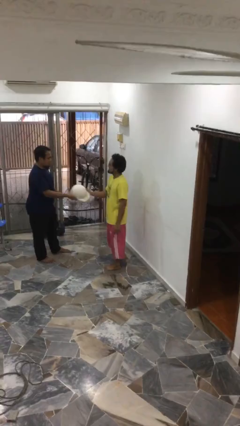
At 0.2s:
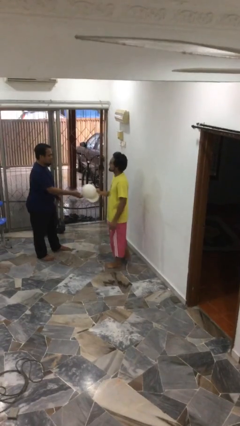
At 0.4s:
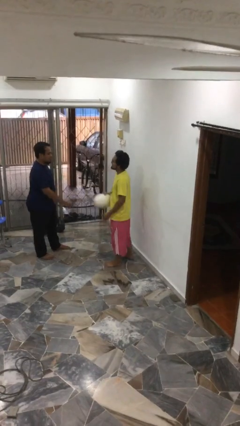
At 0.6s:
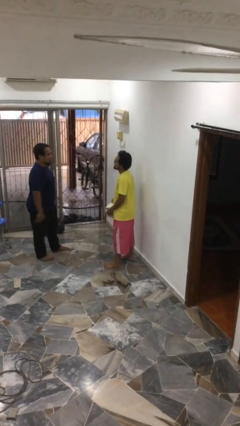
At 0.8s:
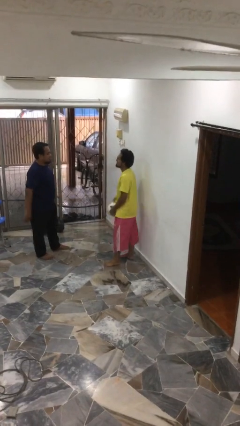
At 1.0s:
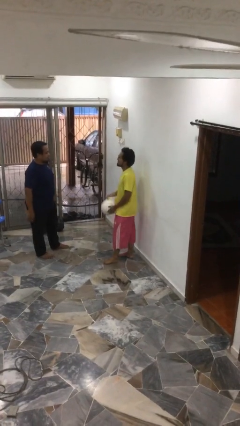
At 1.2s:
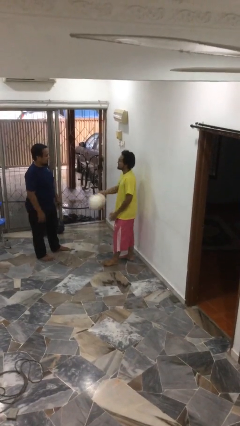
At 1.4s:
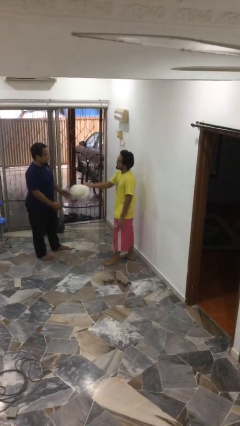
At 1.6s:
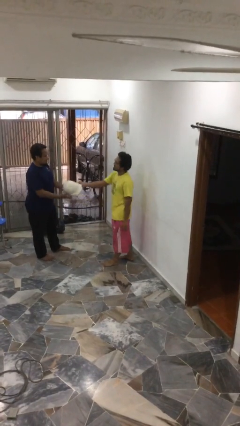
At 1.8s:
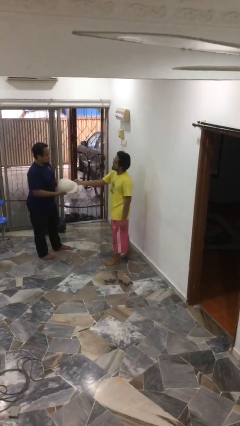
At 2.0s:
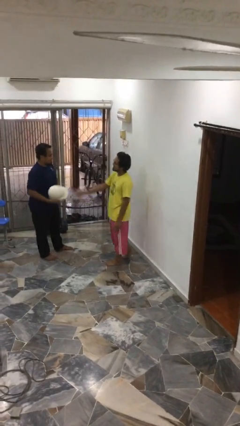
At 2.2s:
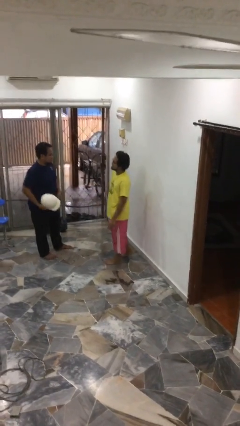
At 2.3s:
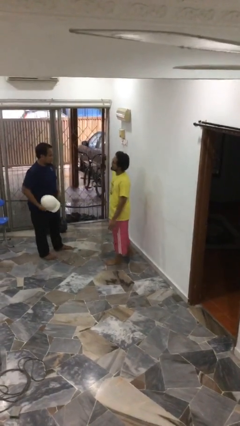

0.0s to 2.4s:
person transfers object to person

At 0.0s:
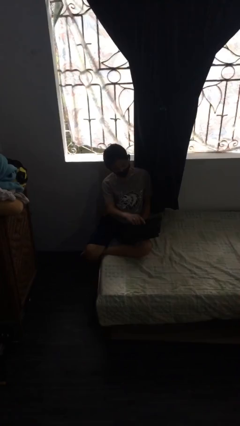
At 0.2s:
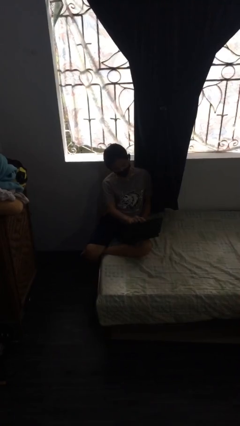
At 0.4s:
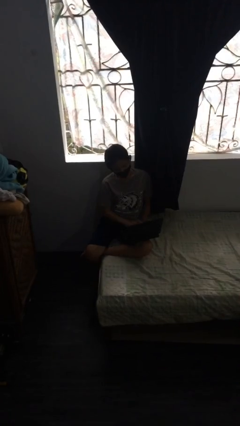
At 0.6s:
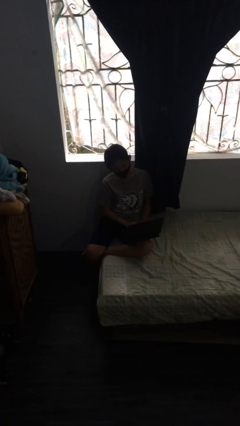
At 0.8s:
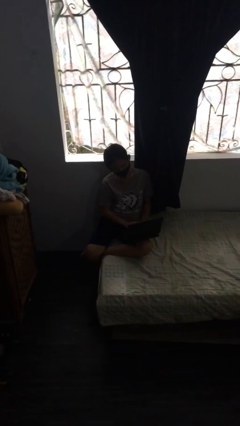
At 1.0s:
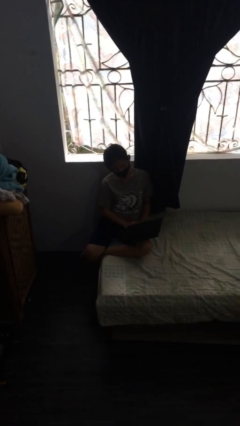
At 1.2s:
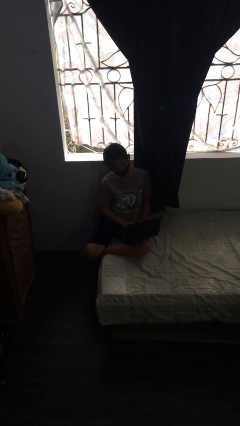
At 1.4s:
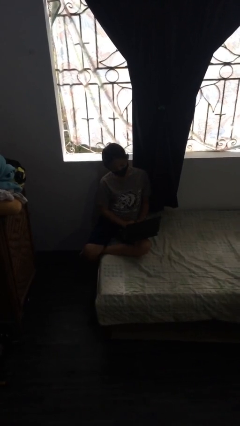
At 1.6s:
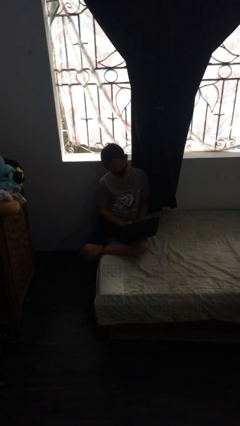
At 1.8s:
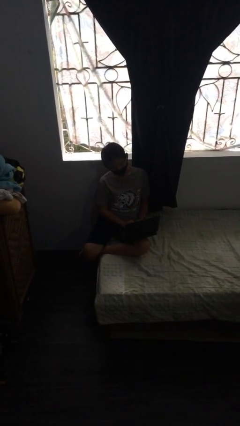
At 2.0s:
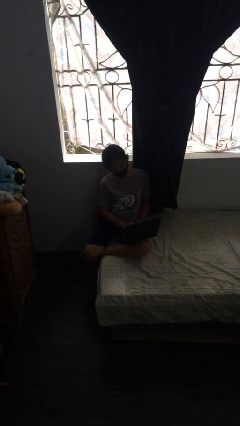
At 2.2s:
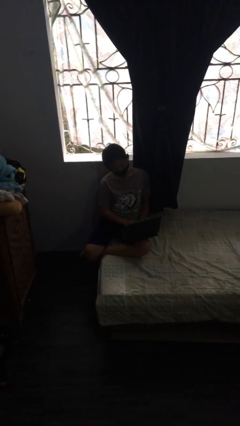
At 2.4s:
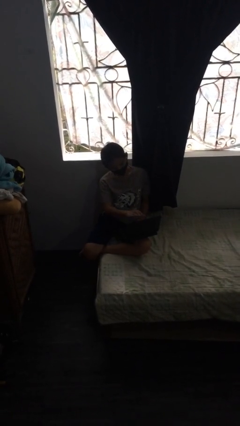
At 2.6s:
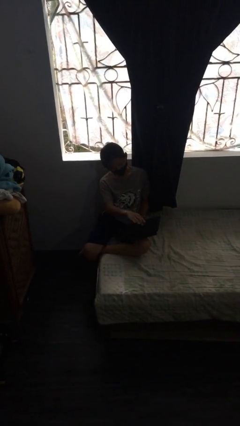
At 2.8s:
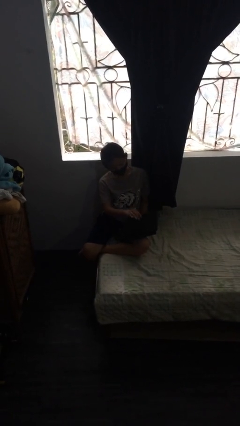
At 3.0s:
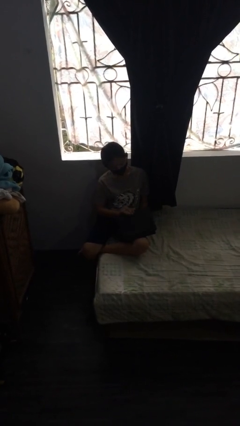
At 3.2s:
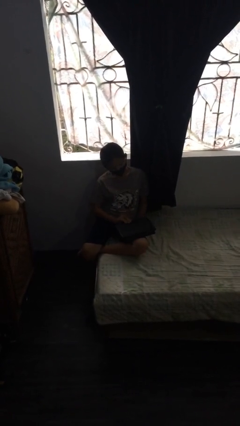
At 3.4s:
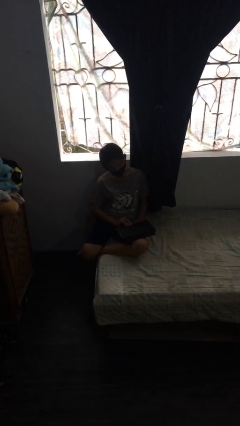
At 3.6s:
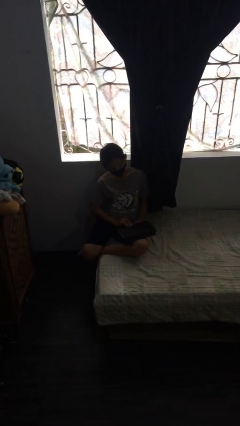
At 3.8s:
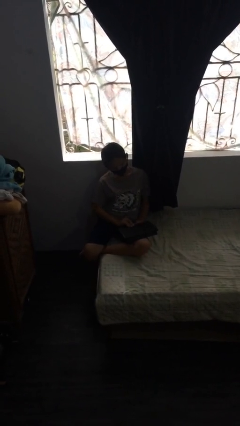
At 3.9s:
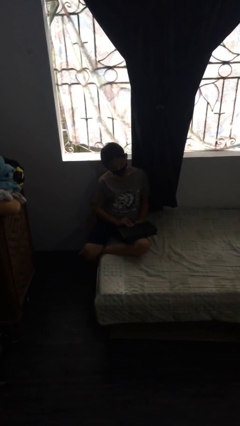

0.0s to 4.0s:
person interacts with laptop

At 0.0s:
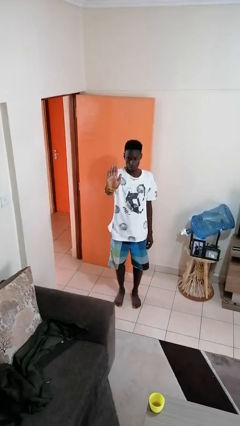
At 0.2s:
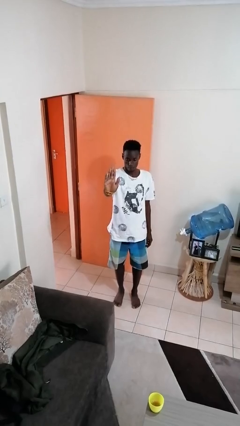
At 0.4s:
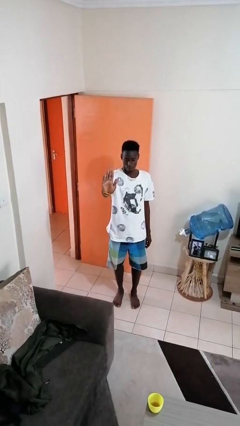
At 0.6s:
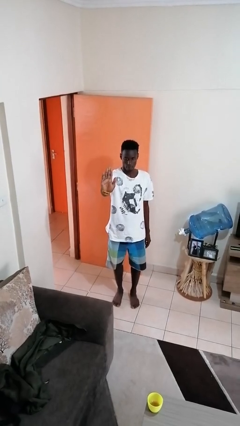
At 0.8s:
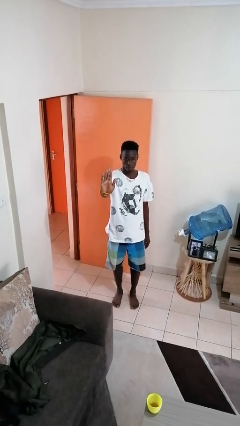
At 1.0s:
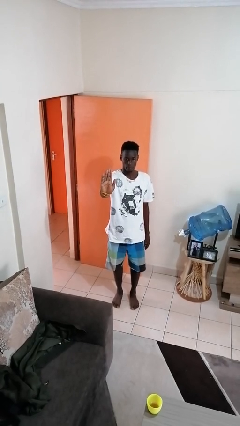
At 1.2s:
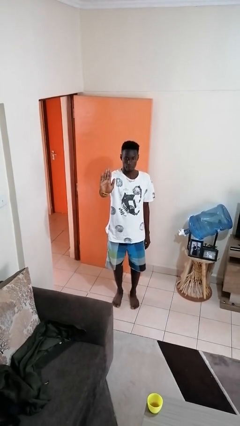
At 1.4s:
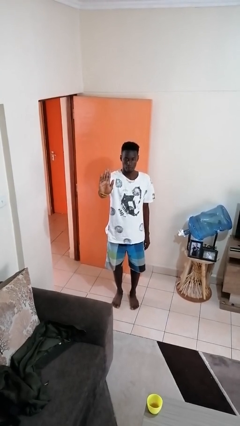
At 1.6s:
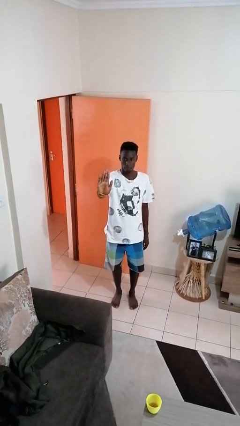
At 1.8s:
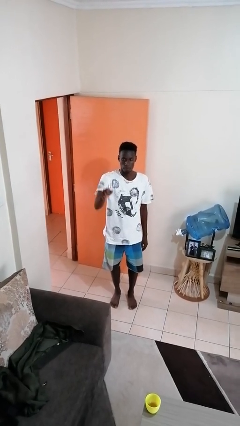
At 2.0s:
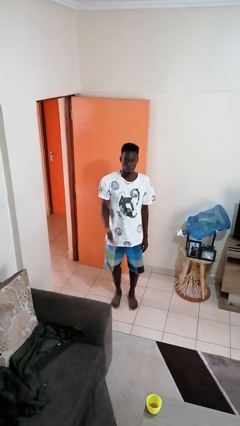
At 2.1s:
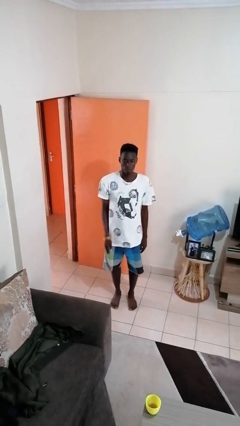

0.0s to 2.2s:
person gestures stop

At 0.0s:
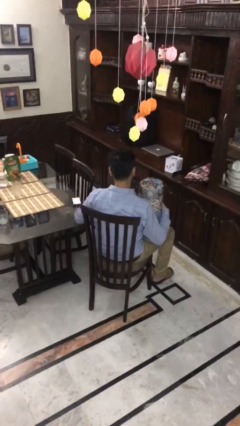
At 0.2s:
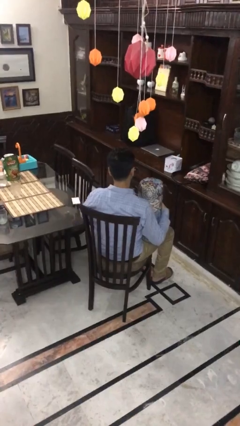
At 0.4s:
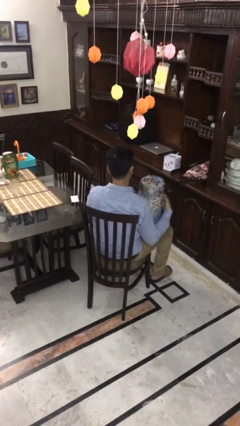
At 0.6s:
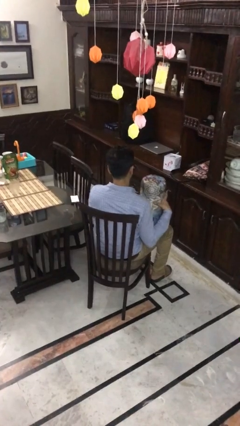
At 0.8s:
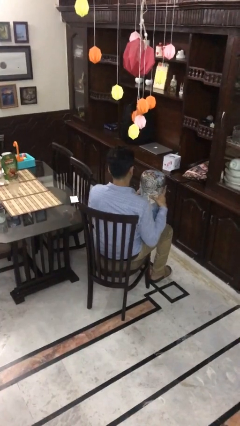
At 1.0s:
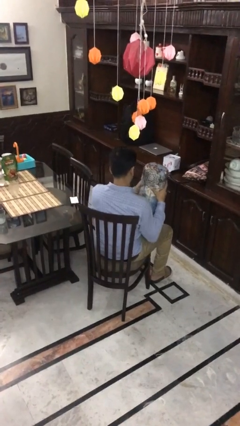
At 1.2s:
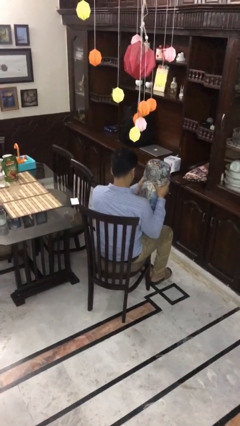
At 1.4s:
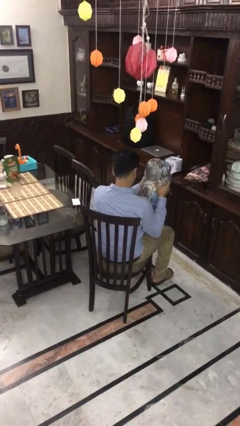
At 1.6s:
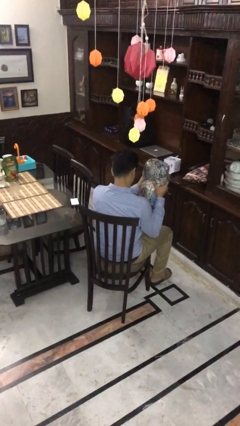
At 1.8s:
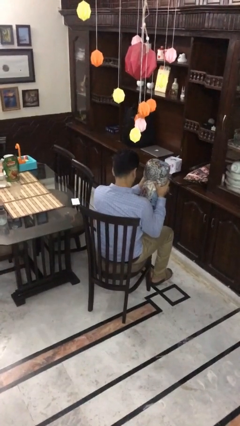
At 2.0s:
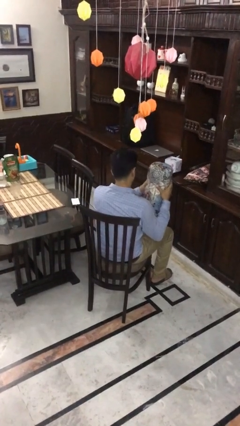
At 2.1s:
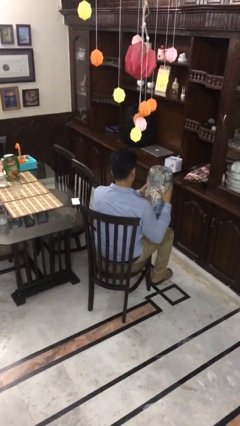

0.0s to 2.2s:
person squeezes object

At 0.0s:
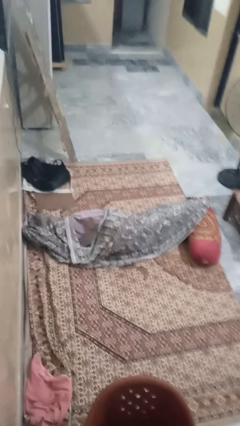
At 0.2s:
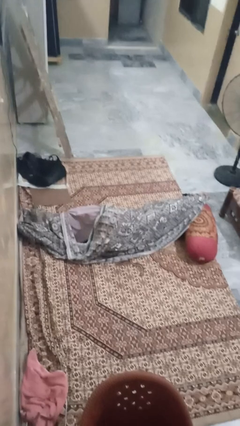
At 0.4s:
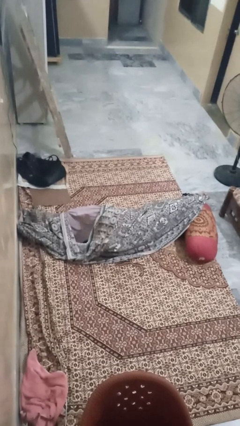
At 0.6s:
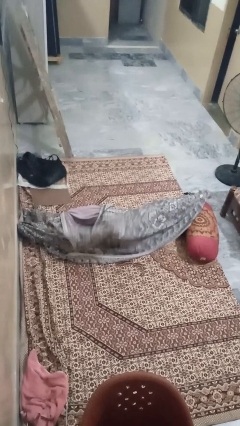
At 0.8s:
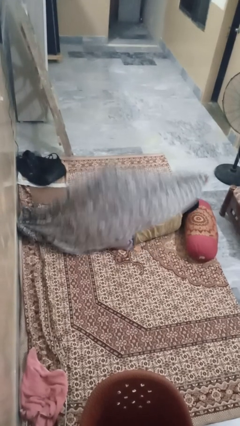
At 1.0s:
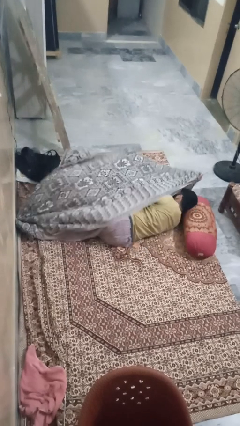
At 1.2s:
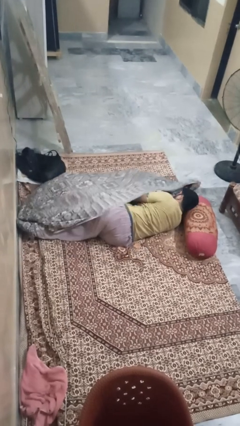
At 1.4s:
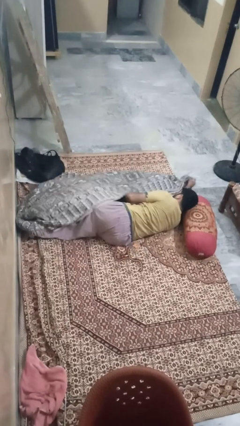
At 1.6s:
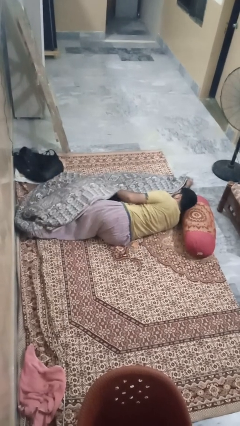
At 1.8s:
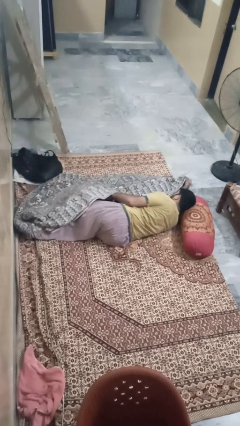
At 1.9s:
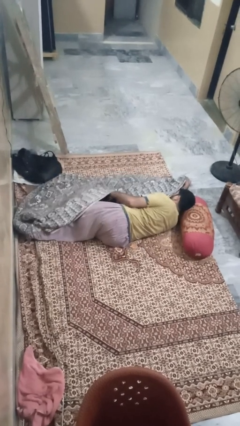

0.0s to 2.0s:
person uncovers with blanket

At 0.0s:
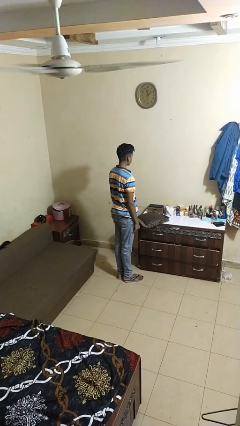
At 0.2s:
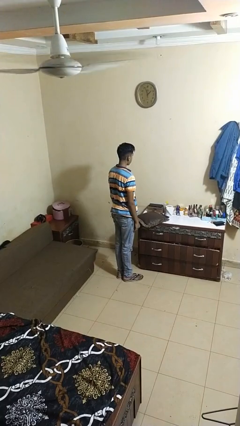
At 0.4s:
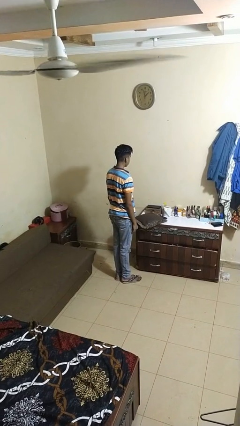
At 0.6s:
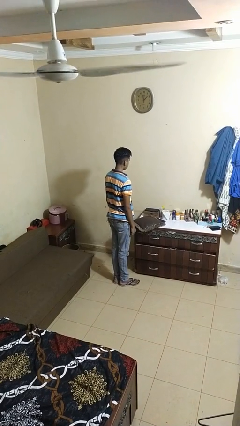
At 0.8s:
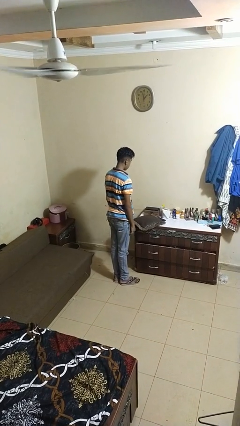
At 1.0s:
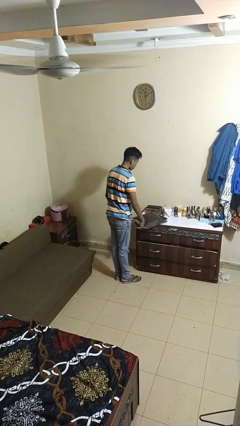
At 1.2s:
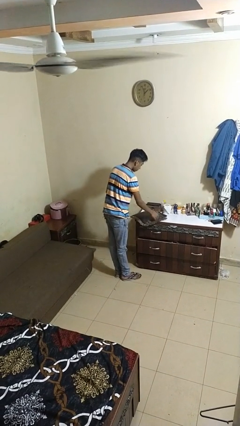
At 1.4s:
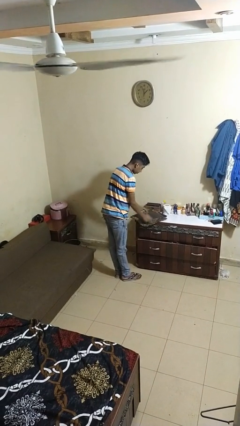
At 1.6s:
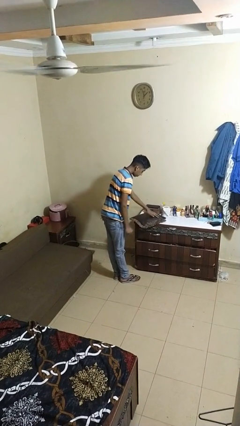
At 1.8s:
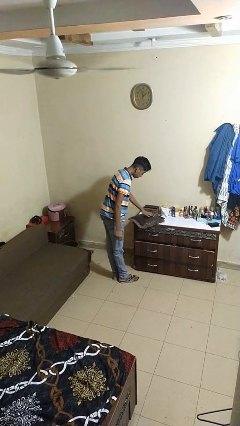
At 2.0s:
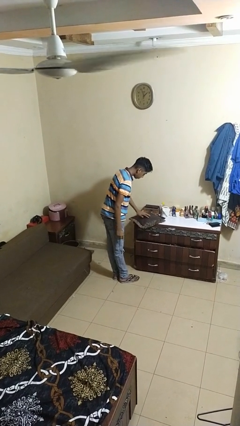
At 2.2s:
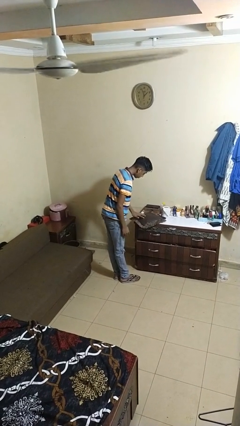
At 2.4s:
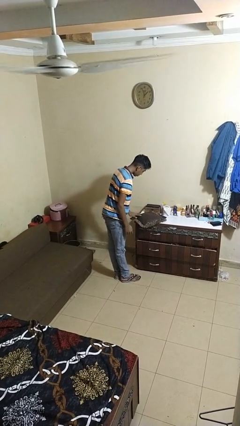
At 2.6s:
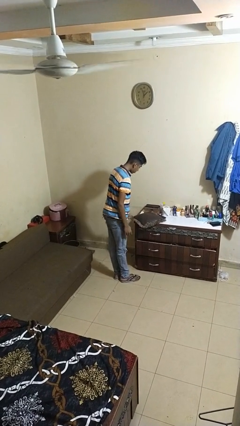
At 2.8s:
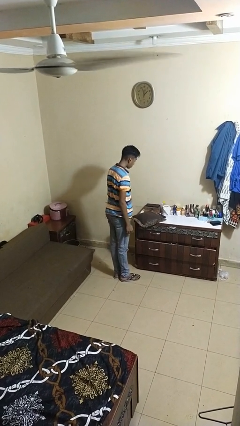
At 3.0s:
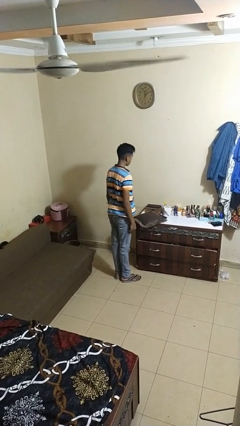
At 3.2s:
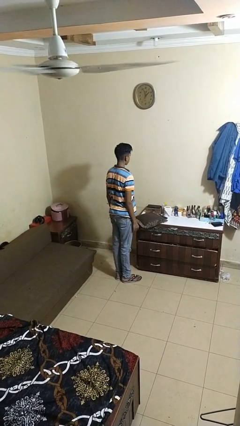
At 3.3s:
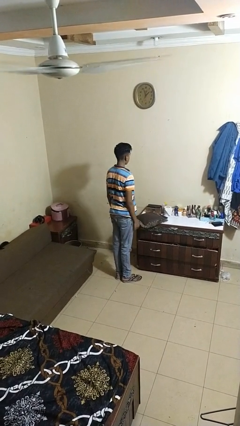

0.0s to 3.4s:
person waves hand over object

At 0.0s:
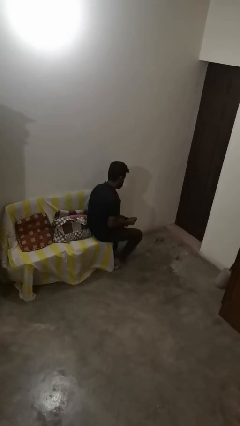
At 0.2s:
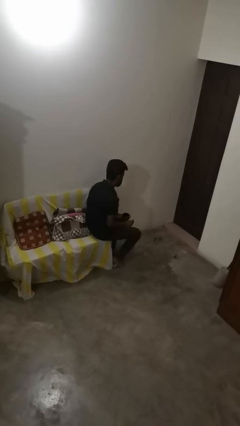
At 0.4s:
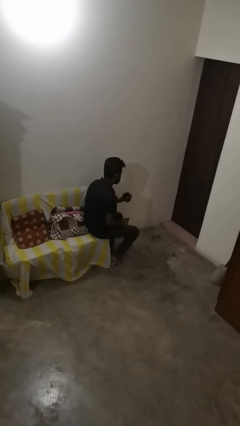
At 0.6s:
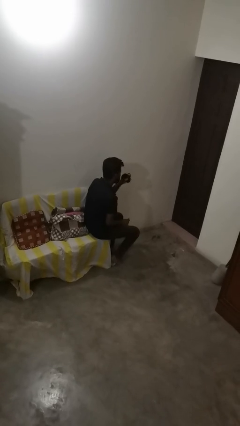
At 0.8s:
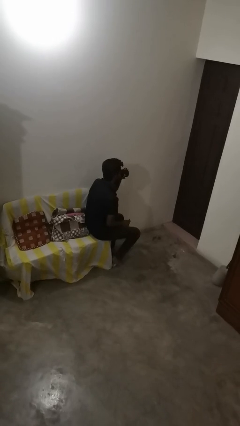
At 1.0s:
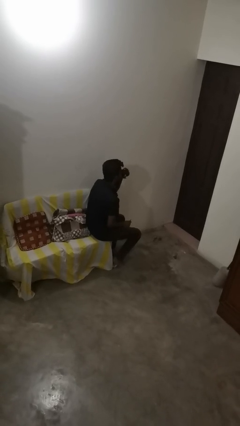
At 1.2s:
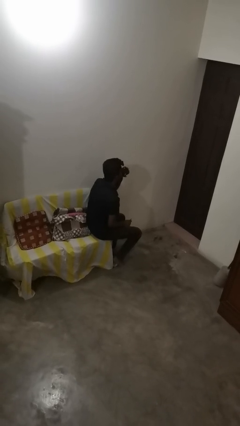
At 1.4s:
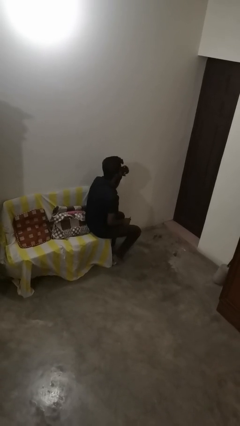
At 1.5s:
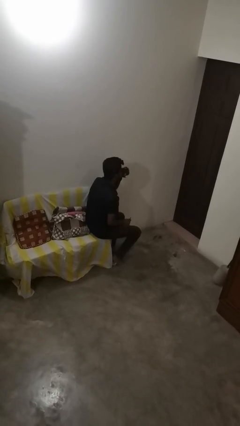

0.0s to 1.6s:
person drinks from mug
